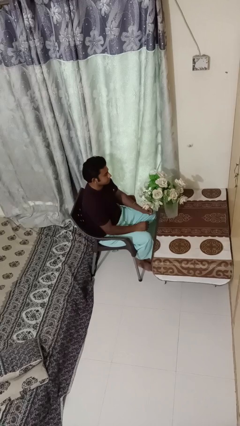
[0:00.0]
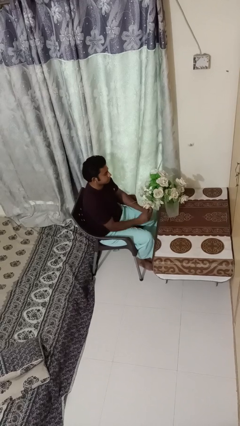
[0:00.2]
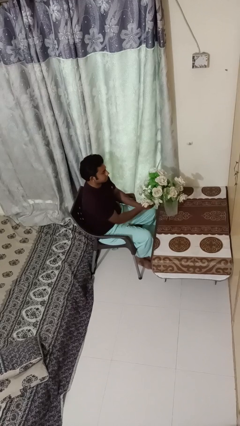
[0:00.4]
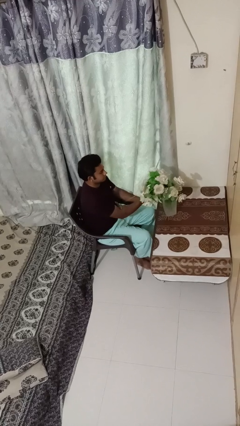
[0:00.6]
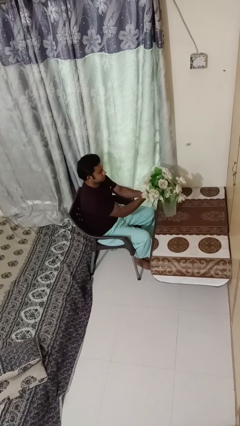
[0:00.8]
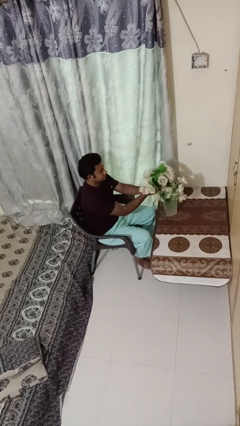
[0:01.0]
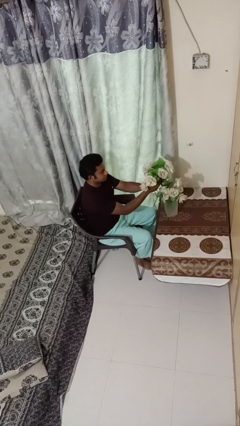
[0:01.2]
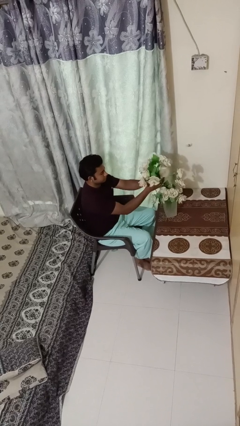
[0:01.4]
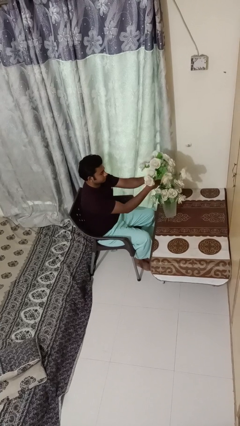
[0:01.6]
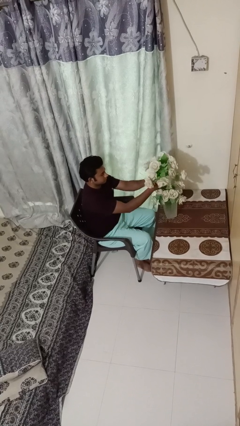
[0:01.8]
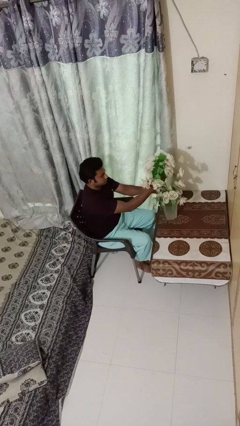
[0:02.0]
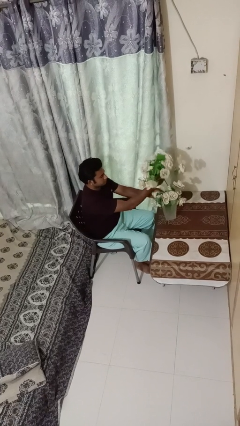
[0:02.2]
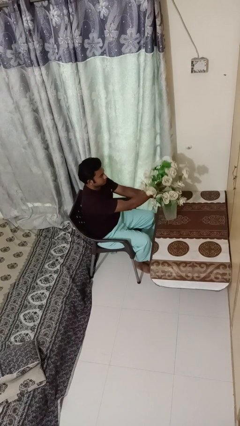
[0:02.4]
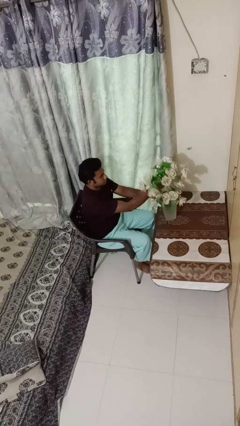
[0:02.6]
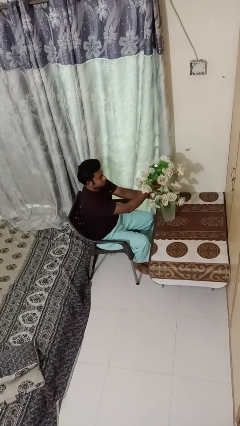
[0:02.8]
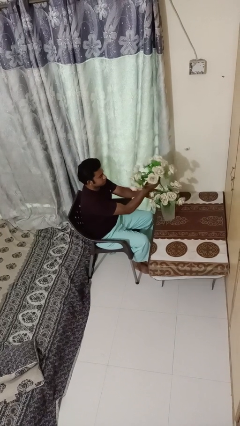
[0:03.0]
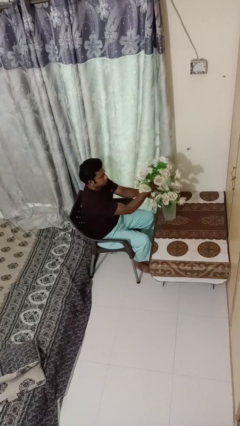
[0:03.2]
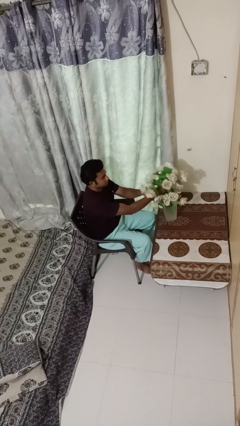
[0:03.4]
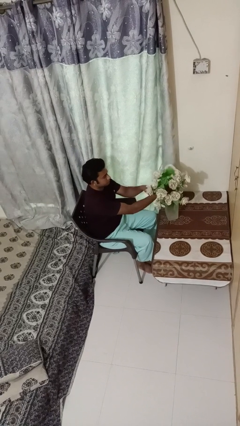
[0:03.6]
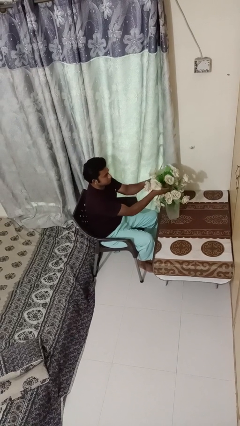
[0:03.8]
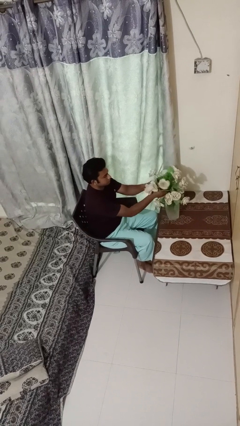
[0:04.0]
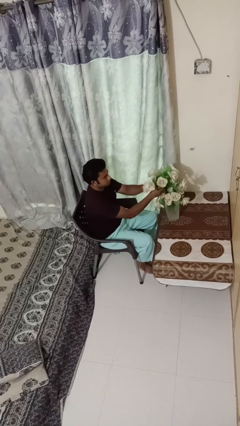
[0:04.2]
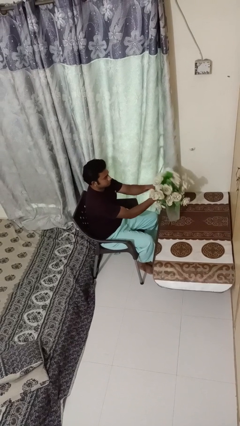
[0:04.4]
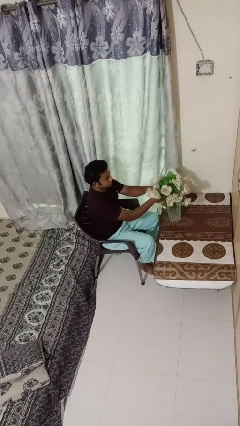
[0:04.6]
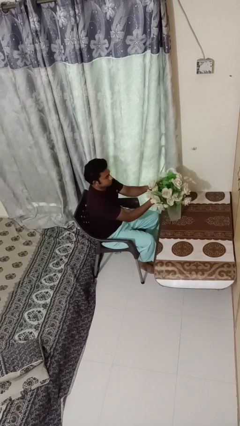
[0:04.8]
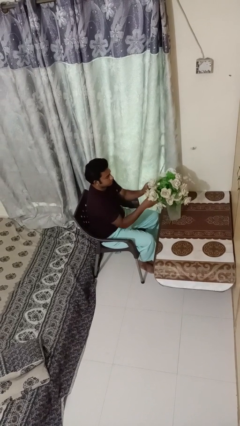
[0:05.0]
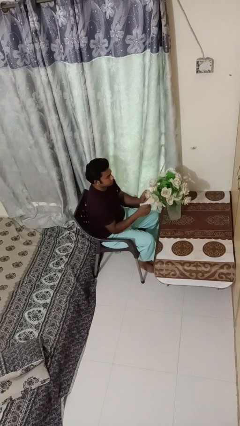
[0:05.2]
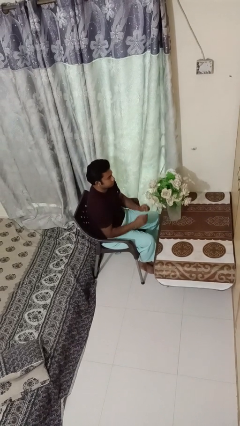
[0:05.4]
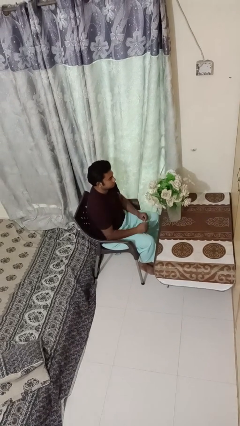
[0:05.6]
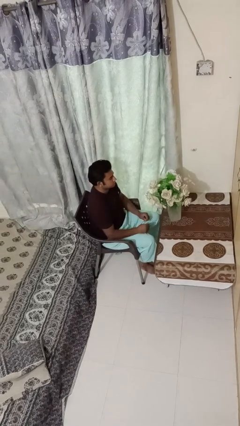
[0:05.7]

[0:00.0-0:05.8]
person arranges flowers in vase

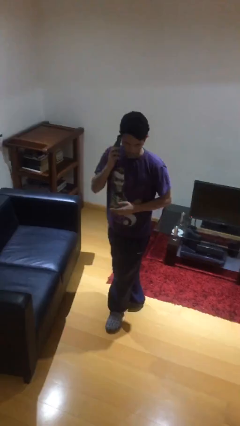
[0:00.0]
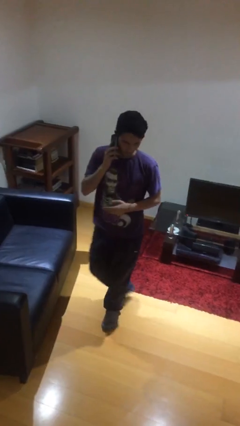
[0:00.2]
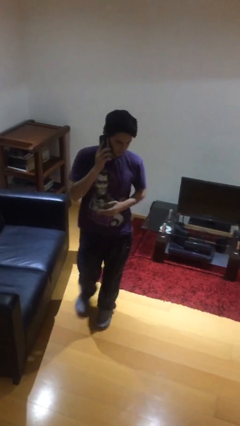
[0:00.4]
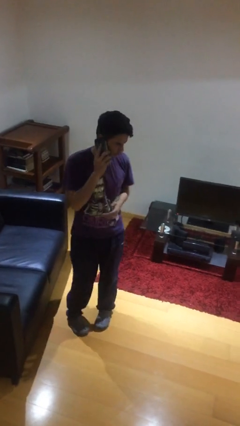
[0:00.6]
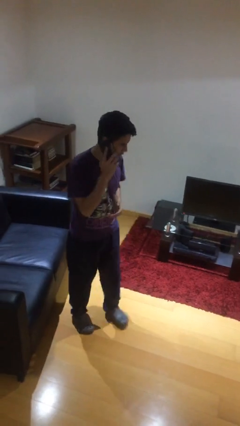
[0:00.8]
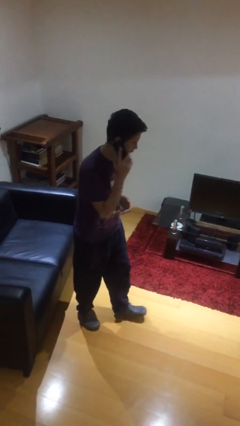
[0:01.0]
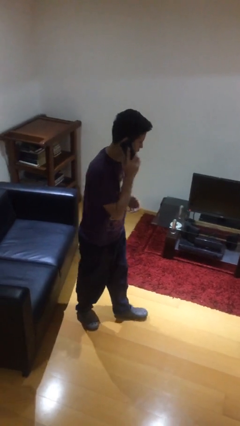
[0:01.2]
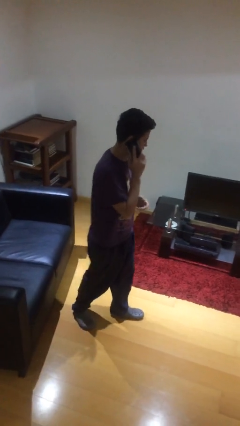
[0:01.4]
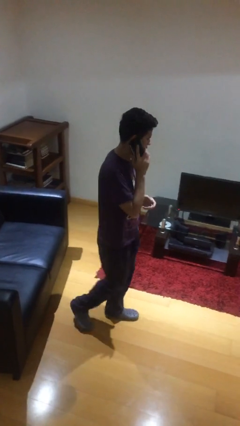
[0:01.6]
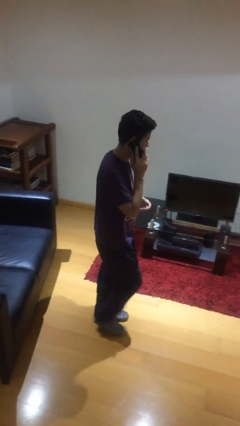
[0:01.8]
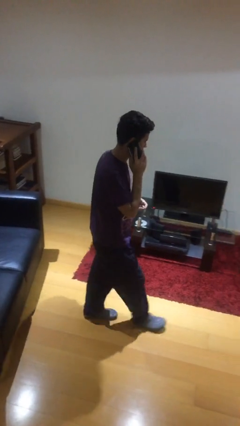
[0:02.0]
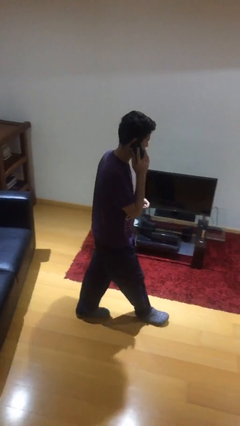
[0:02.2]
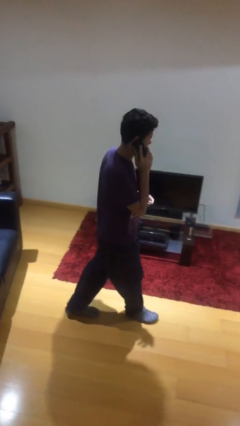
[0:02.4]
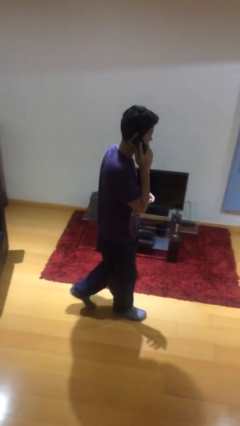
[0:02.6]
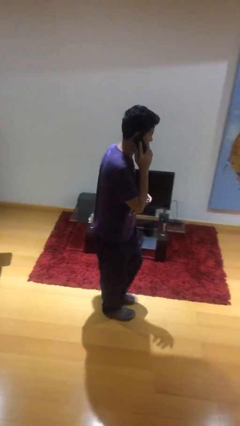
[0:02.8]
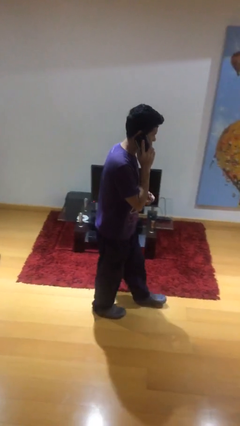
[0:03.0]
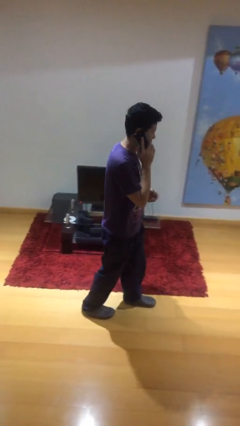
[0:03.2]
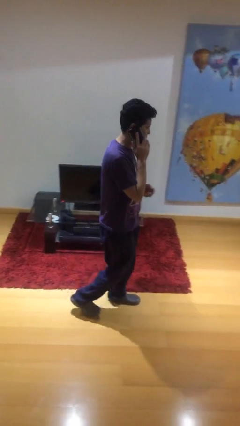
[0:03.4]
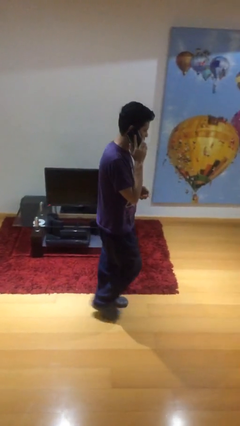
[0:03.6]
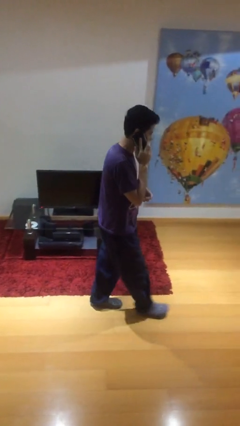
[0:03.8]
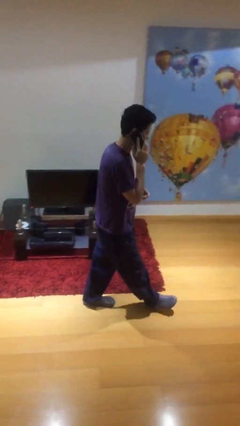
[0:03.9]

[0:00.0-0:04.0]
person talks on phone

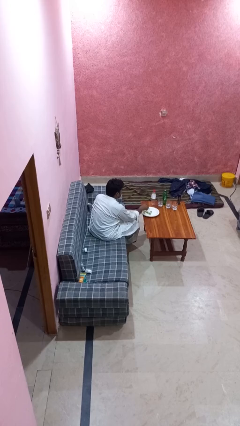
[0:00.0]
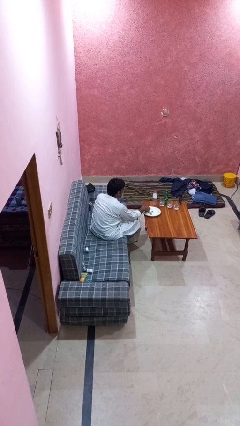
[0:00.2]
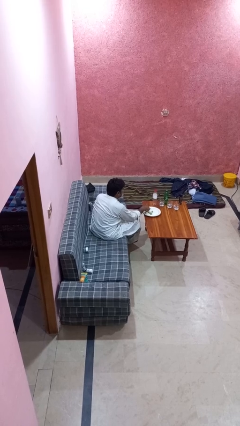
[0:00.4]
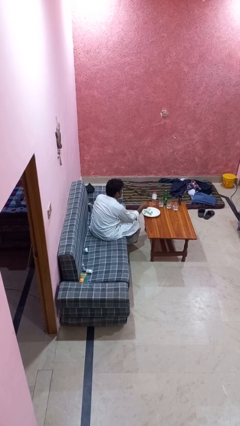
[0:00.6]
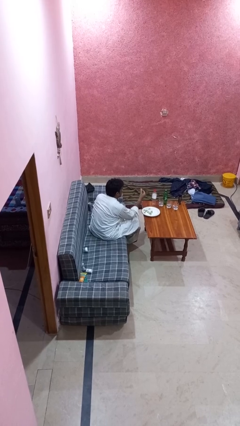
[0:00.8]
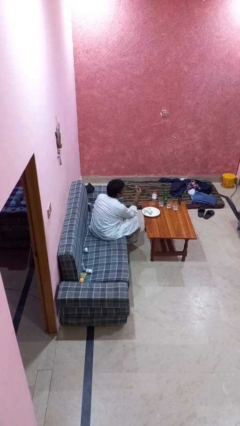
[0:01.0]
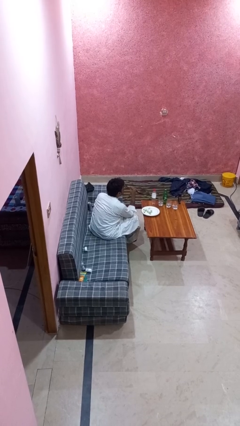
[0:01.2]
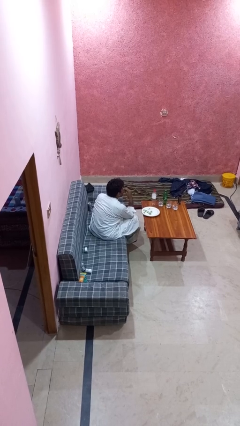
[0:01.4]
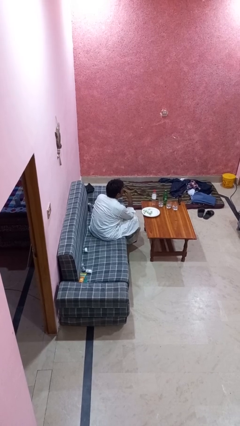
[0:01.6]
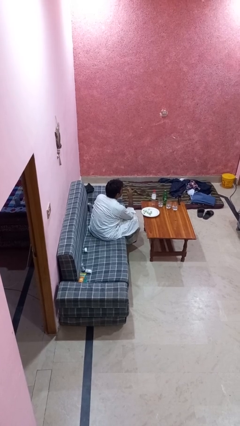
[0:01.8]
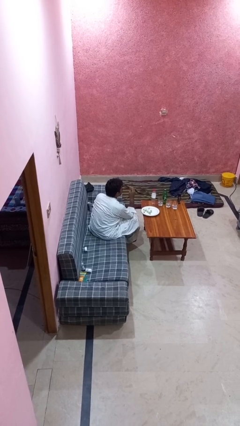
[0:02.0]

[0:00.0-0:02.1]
person eats with hands

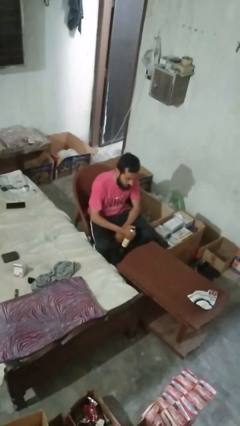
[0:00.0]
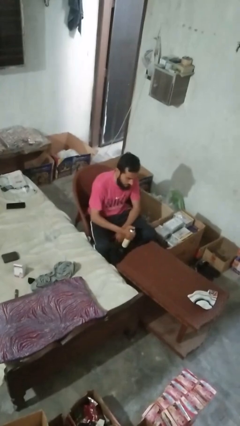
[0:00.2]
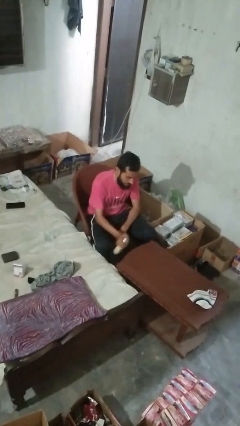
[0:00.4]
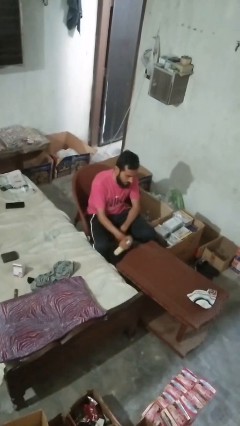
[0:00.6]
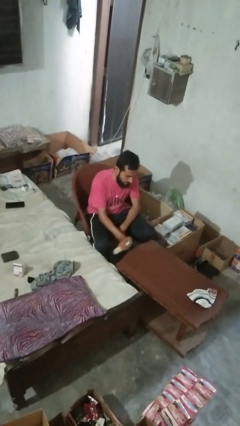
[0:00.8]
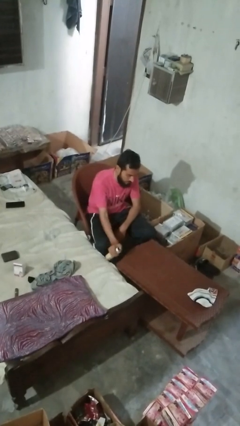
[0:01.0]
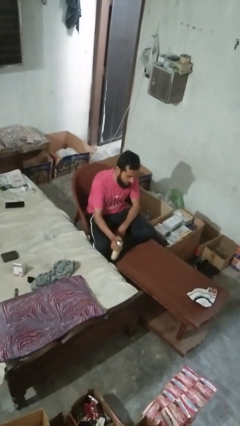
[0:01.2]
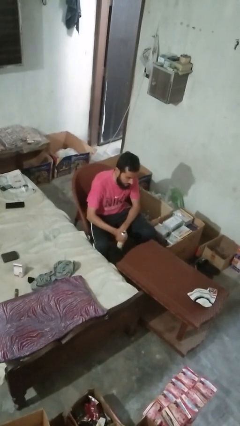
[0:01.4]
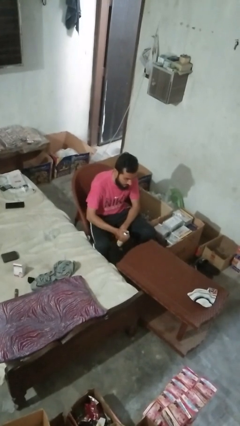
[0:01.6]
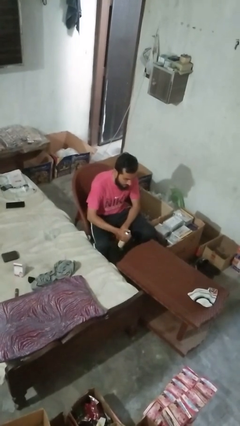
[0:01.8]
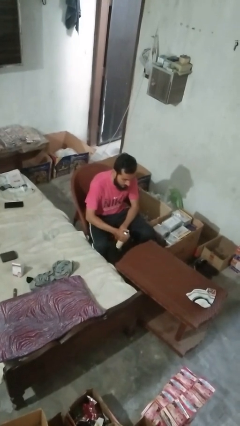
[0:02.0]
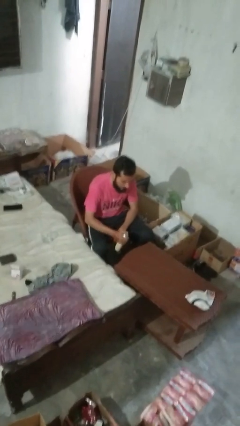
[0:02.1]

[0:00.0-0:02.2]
person sprays from bottle

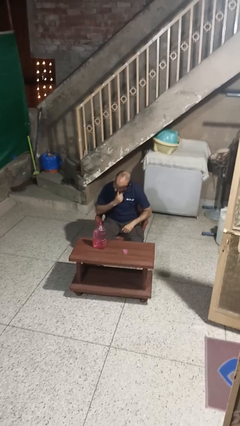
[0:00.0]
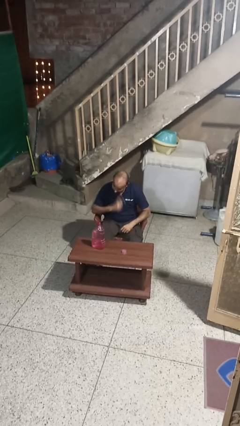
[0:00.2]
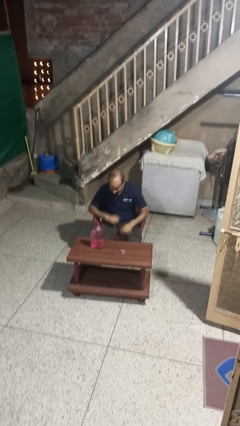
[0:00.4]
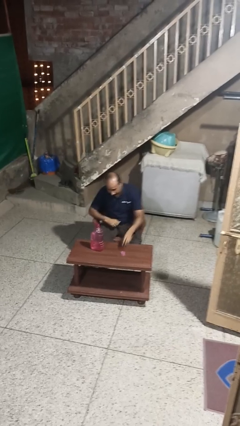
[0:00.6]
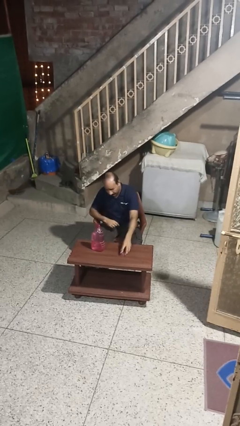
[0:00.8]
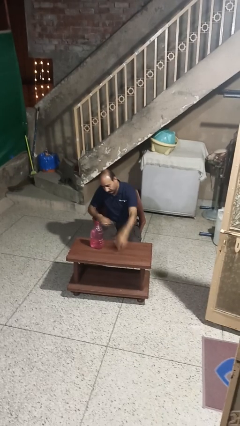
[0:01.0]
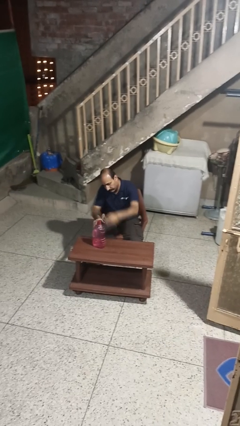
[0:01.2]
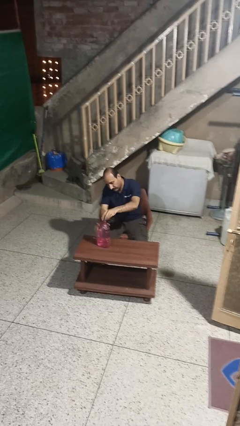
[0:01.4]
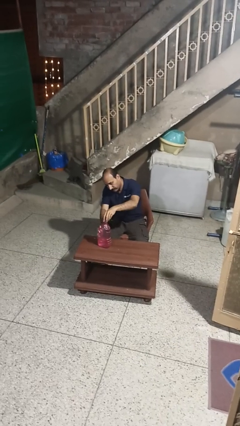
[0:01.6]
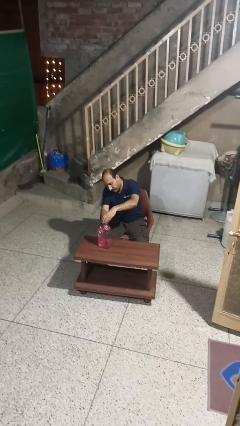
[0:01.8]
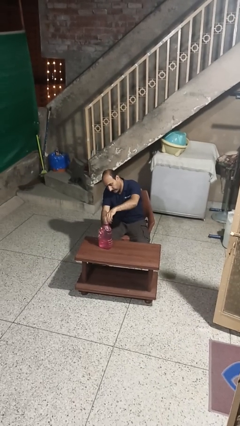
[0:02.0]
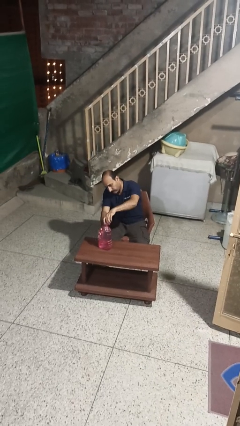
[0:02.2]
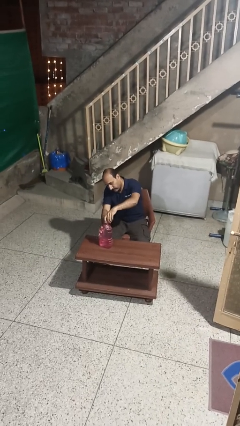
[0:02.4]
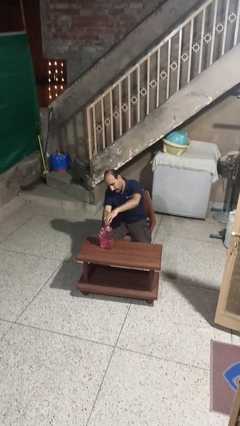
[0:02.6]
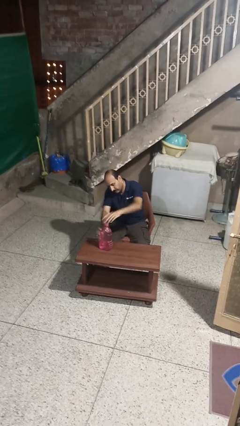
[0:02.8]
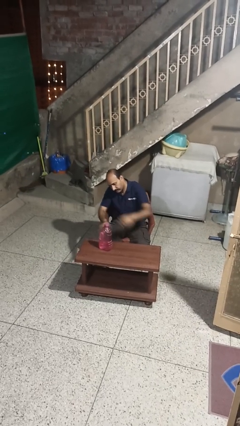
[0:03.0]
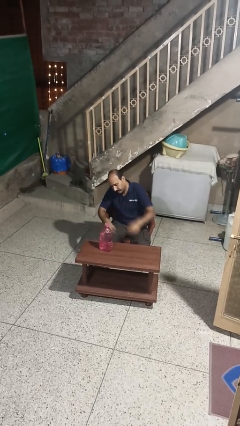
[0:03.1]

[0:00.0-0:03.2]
person screws lid to bottle
